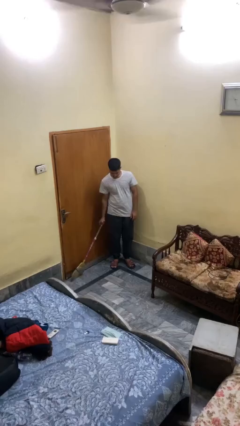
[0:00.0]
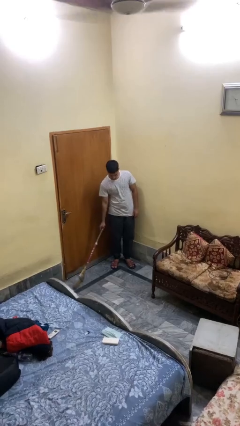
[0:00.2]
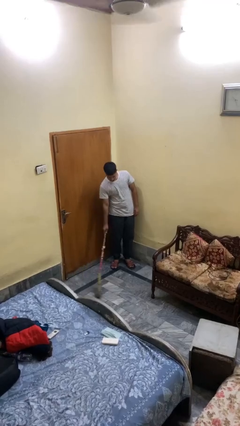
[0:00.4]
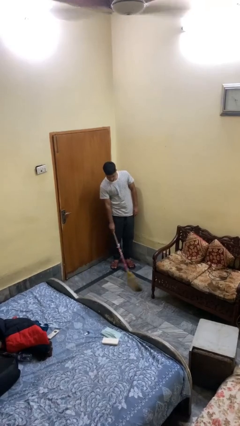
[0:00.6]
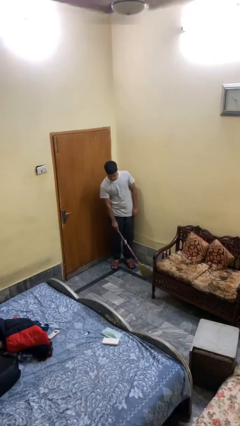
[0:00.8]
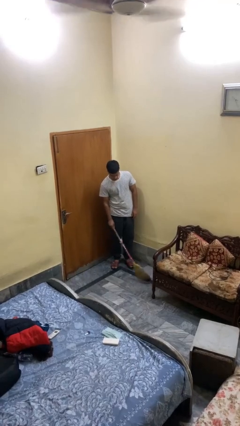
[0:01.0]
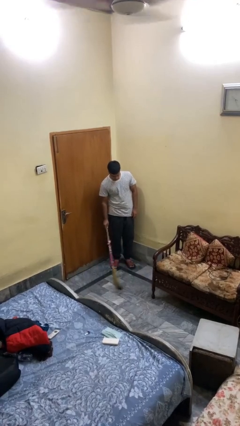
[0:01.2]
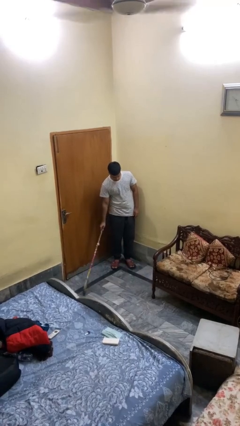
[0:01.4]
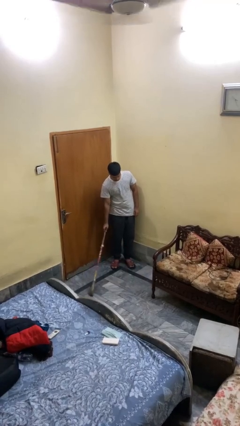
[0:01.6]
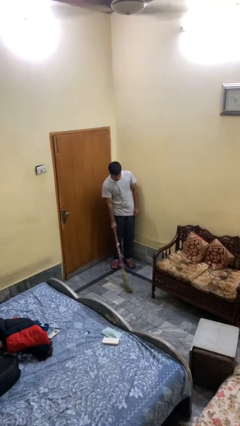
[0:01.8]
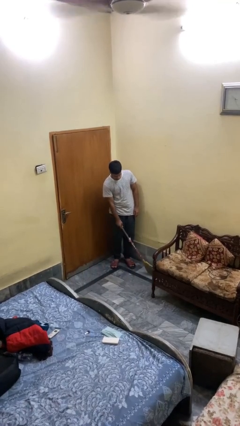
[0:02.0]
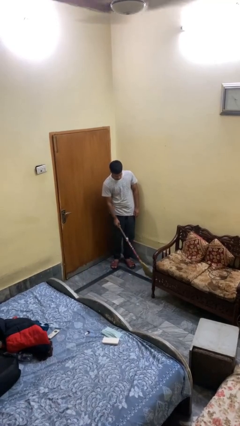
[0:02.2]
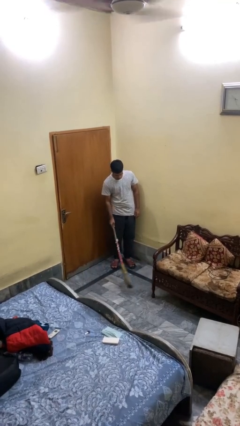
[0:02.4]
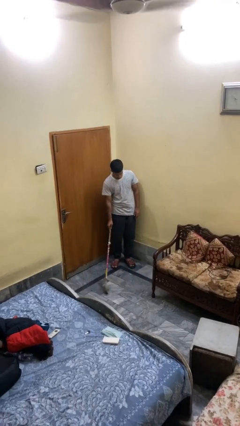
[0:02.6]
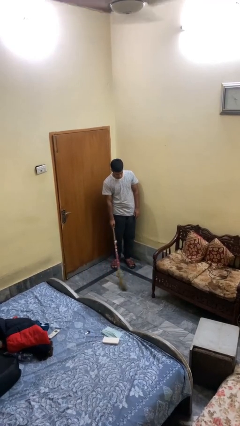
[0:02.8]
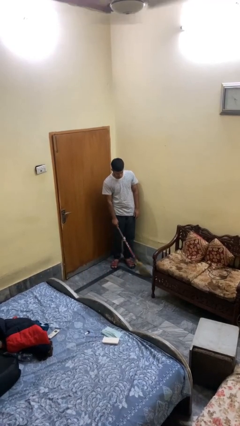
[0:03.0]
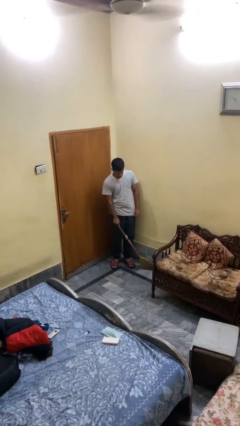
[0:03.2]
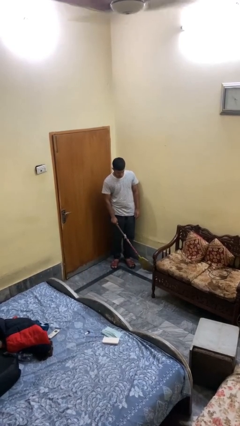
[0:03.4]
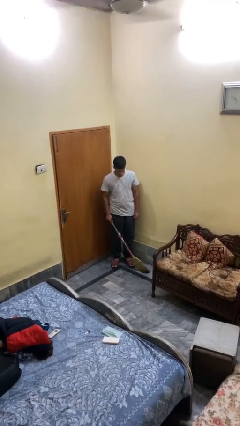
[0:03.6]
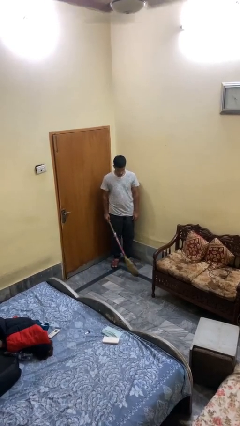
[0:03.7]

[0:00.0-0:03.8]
person sweeps floor

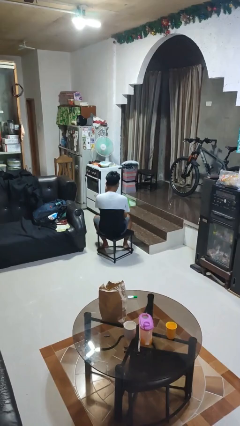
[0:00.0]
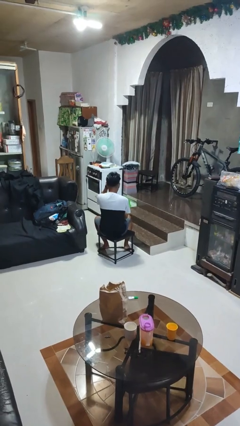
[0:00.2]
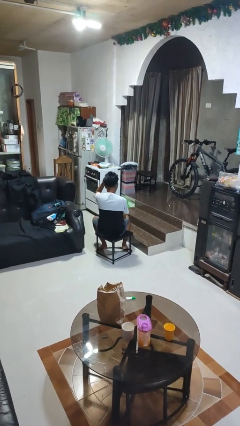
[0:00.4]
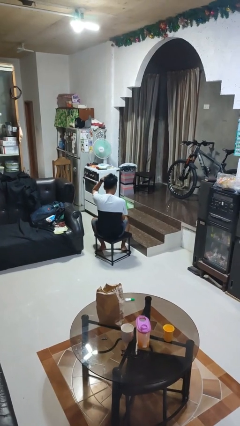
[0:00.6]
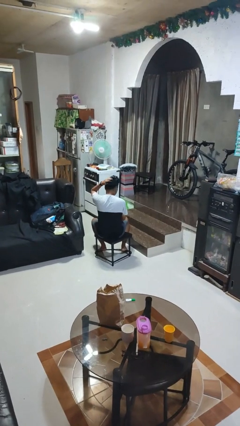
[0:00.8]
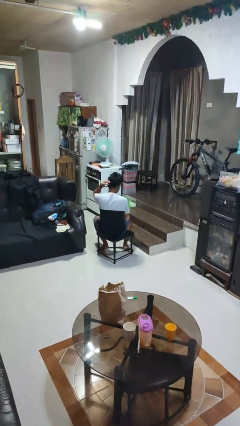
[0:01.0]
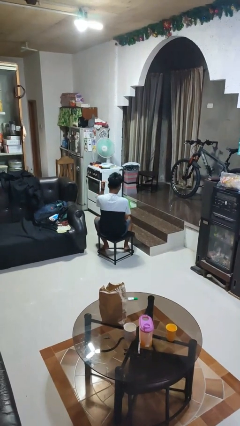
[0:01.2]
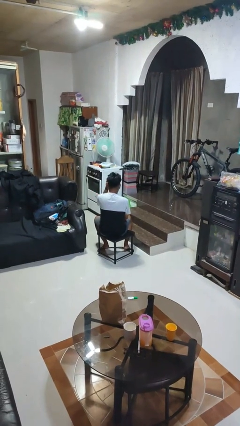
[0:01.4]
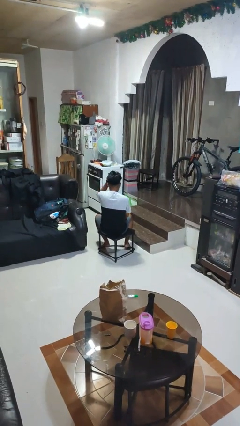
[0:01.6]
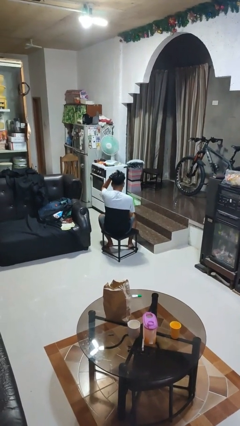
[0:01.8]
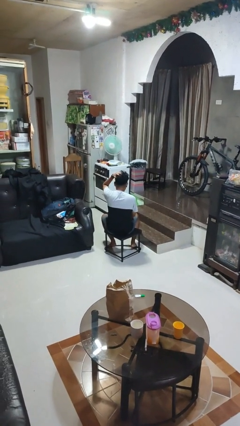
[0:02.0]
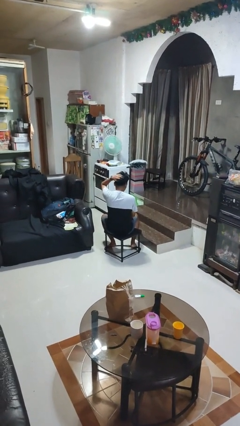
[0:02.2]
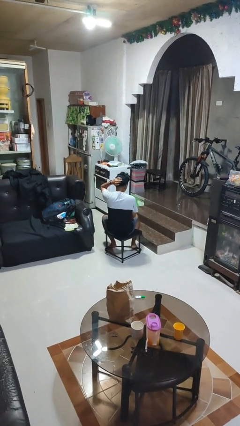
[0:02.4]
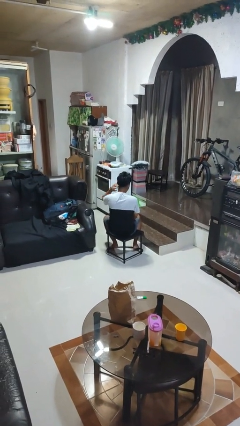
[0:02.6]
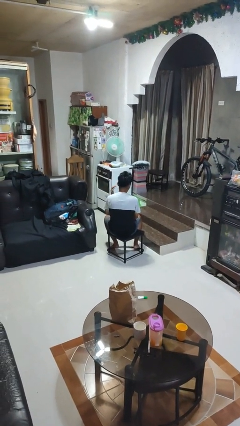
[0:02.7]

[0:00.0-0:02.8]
person strokes hair

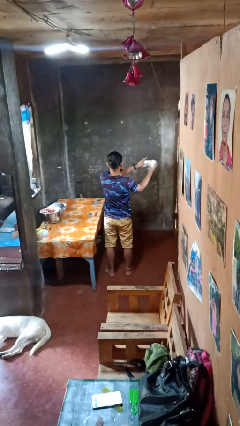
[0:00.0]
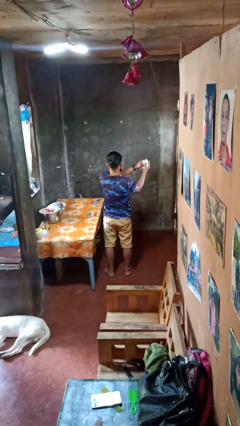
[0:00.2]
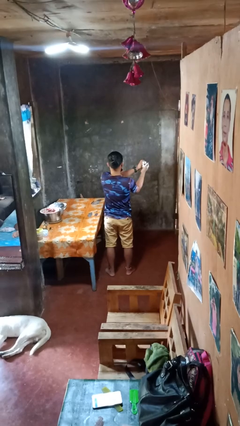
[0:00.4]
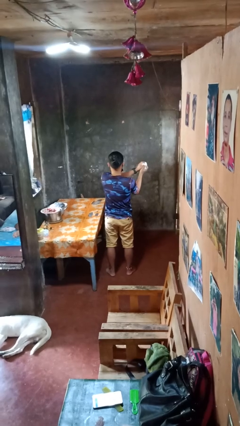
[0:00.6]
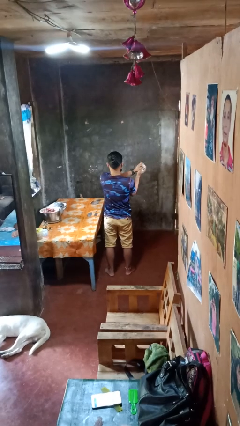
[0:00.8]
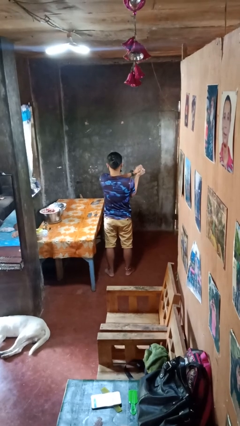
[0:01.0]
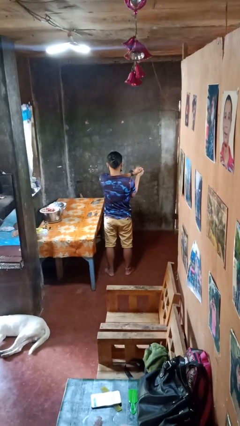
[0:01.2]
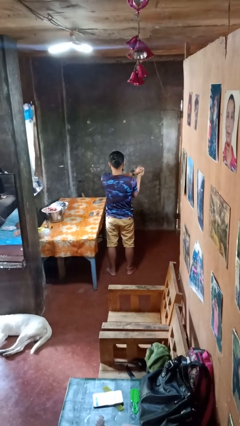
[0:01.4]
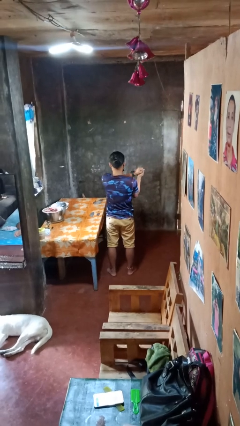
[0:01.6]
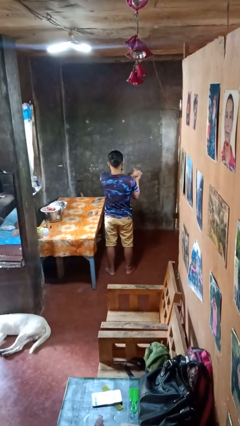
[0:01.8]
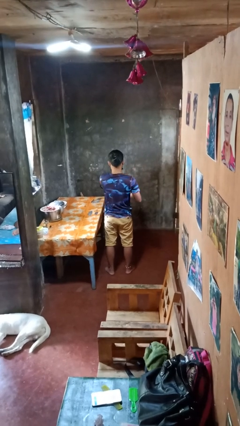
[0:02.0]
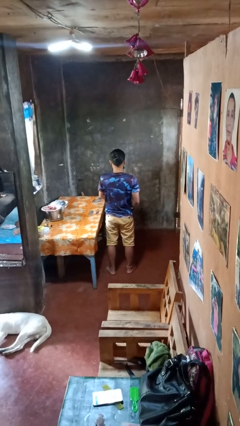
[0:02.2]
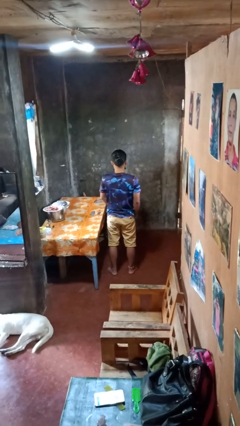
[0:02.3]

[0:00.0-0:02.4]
person crumples paper

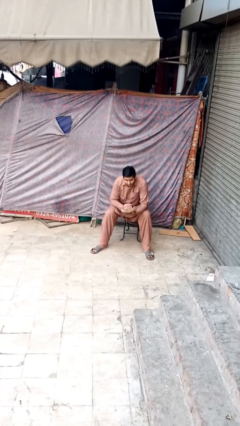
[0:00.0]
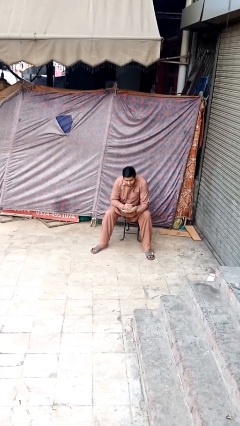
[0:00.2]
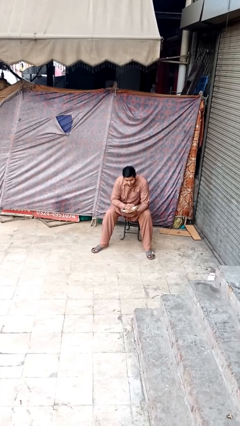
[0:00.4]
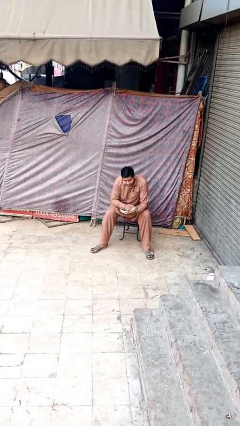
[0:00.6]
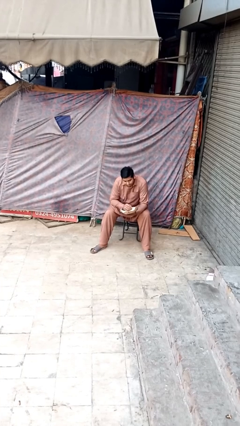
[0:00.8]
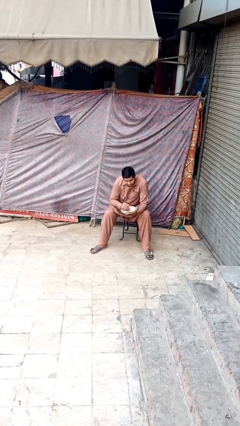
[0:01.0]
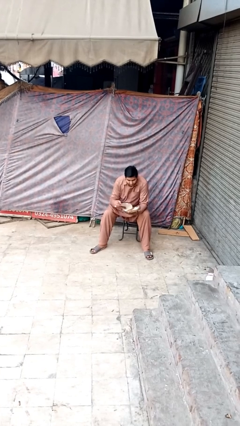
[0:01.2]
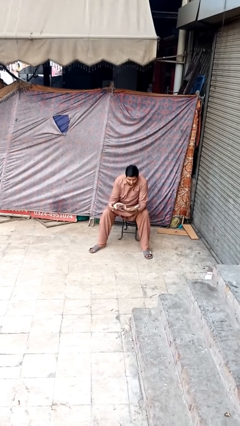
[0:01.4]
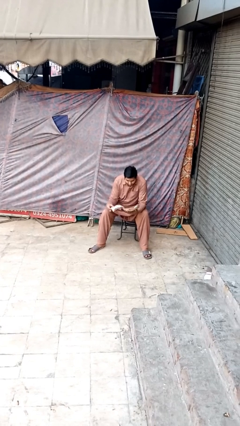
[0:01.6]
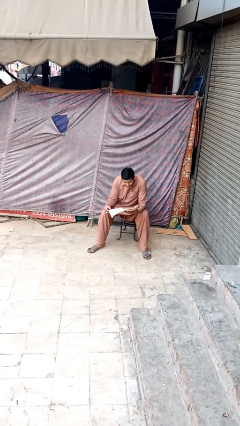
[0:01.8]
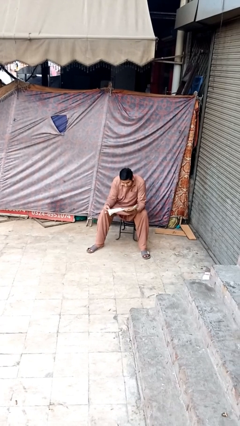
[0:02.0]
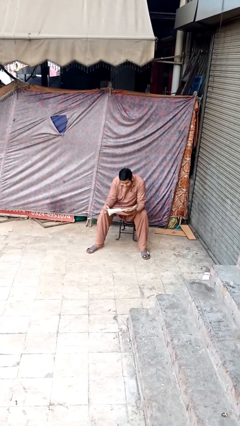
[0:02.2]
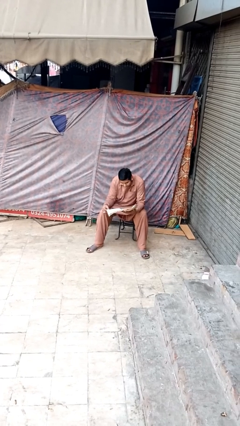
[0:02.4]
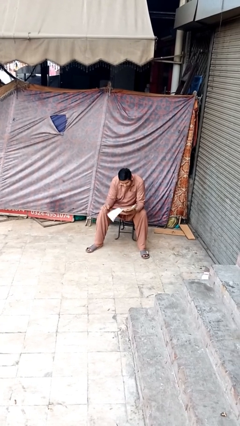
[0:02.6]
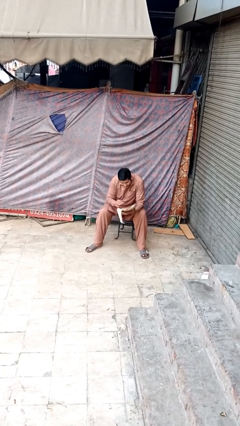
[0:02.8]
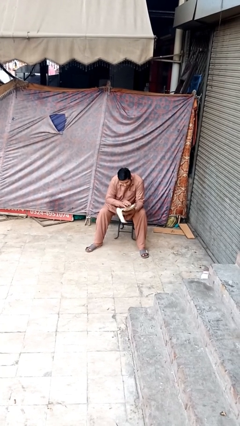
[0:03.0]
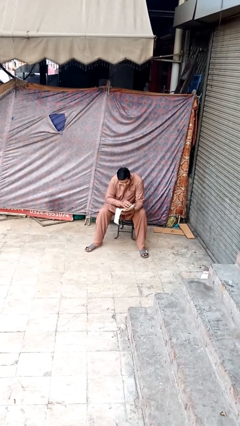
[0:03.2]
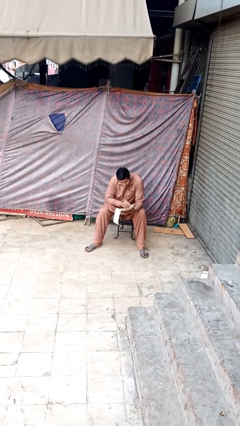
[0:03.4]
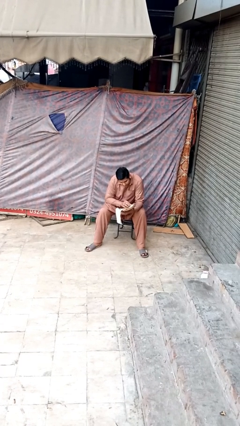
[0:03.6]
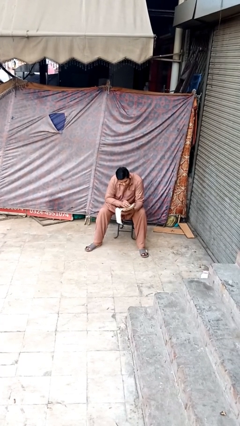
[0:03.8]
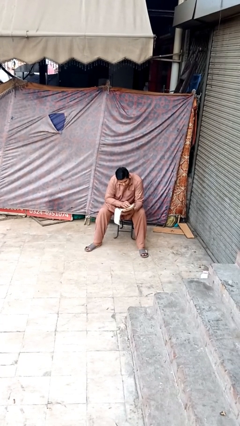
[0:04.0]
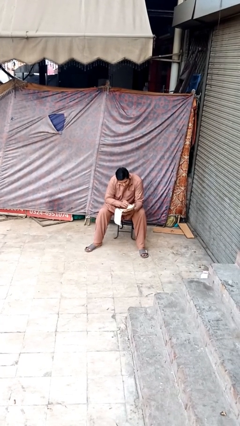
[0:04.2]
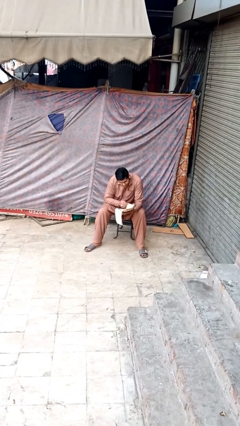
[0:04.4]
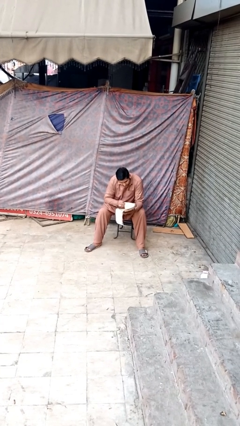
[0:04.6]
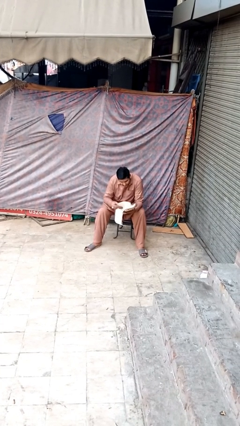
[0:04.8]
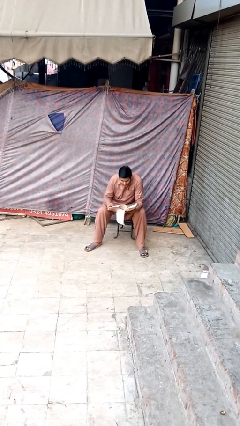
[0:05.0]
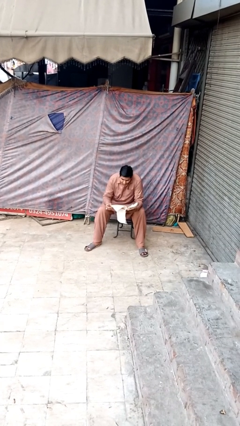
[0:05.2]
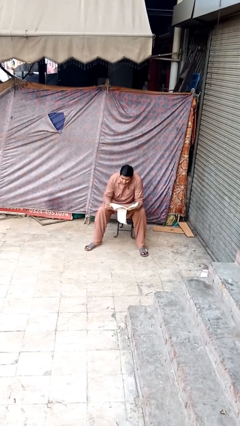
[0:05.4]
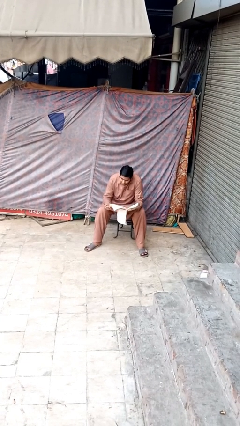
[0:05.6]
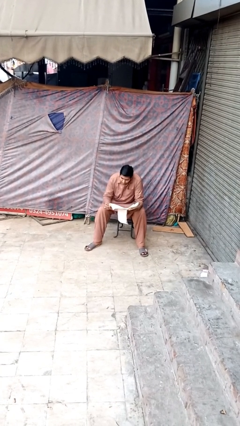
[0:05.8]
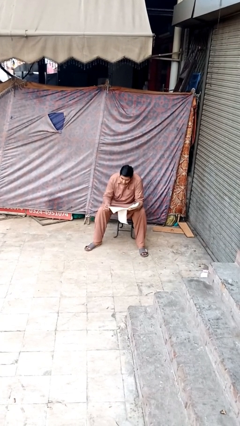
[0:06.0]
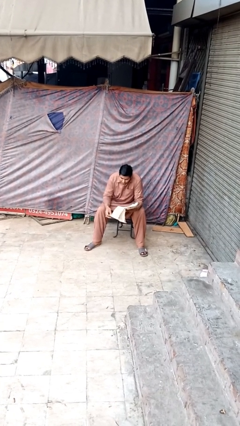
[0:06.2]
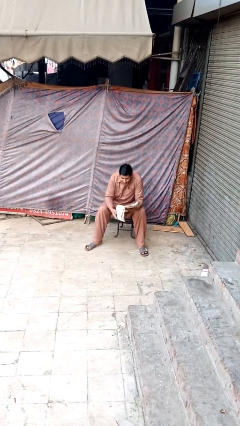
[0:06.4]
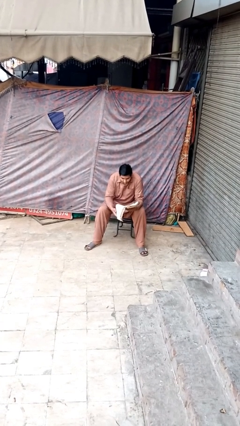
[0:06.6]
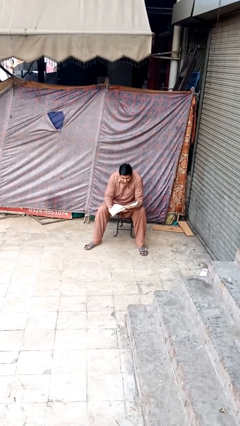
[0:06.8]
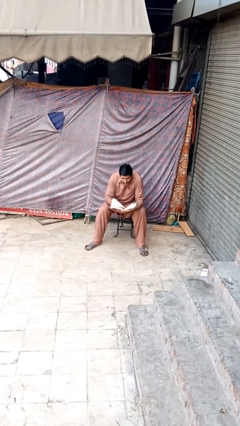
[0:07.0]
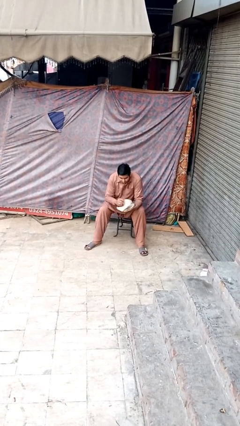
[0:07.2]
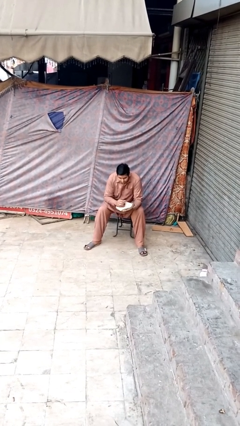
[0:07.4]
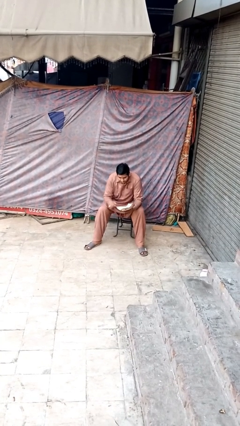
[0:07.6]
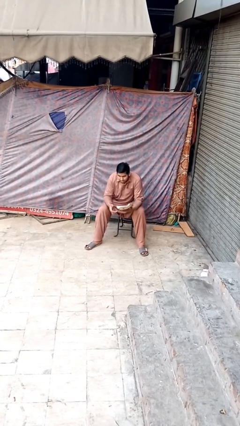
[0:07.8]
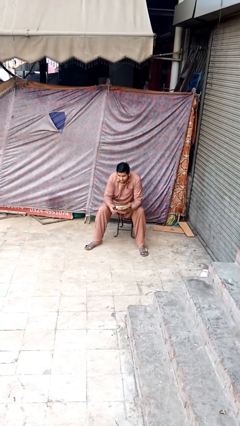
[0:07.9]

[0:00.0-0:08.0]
person reads document

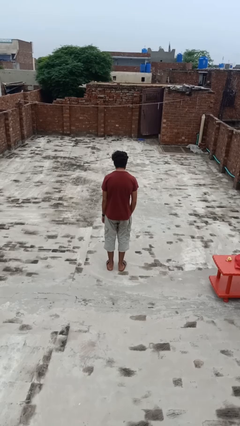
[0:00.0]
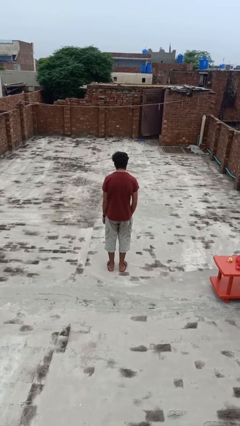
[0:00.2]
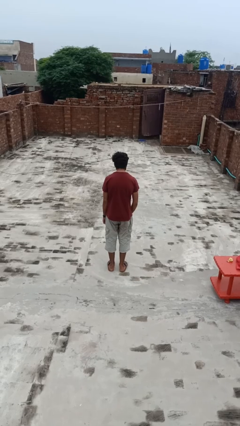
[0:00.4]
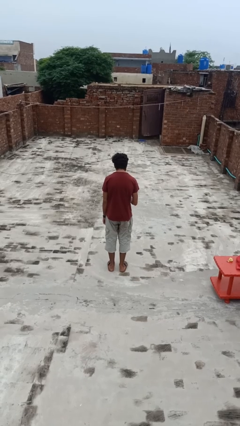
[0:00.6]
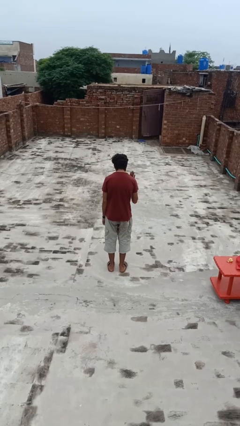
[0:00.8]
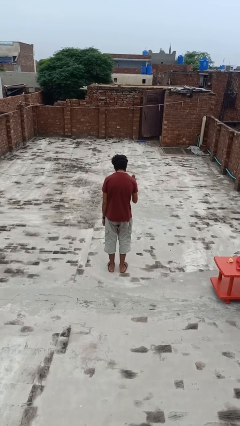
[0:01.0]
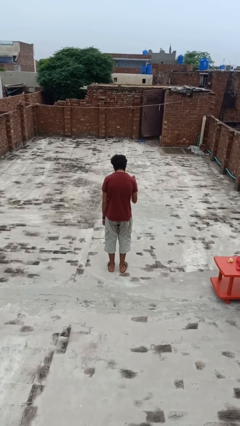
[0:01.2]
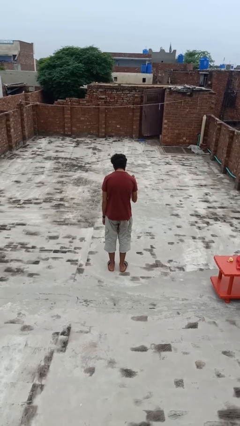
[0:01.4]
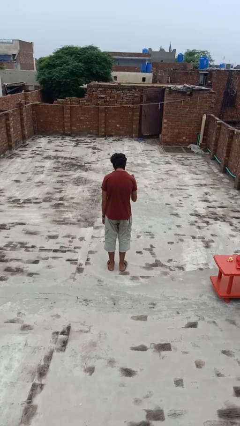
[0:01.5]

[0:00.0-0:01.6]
person gestures stop
